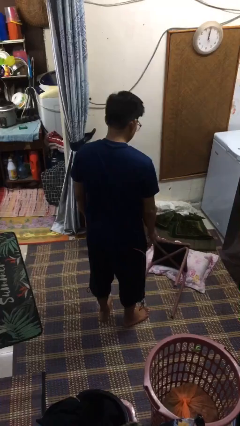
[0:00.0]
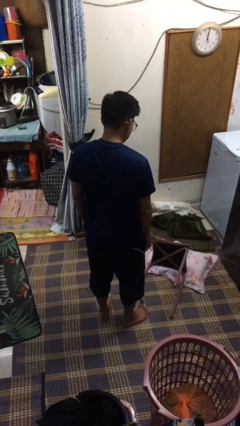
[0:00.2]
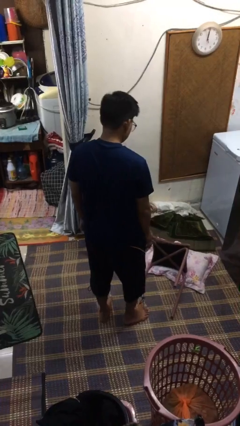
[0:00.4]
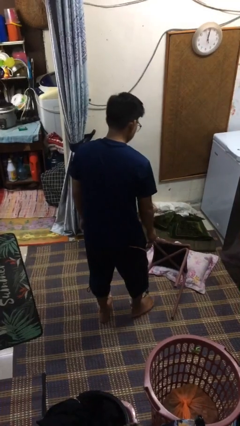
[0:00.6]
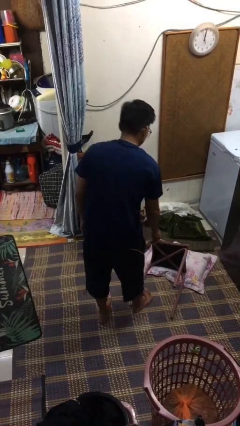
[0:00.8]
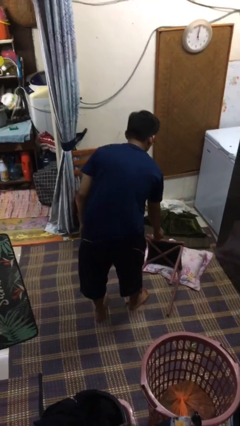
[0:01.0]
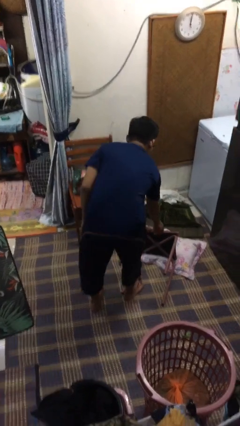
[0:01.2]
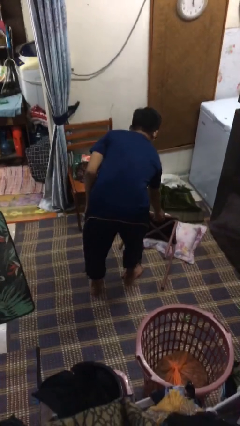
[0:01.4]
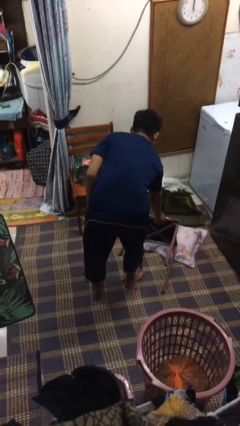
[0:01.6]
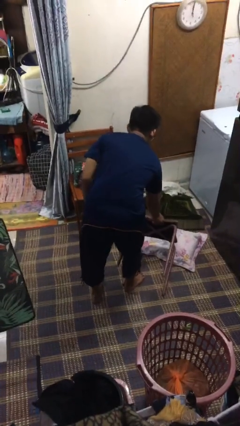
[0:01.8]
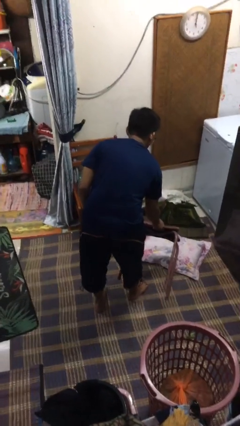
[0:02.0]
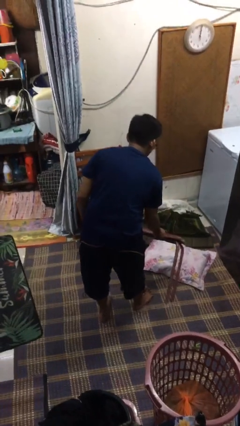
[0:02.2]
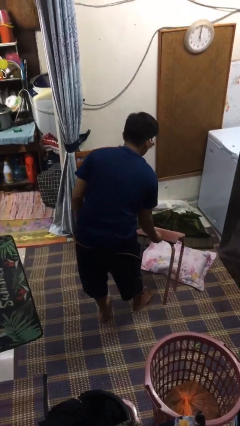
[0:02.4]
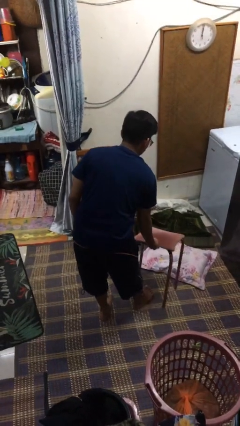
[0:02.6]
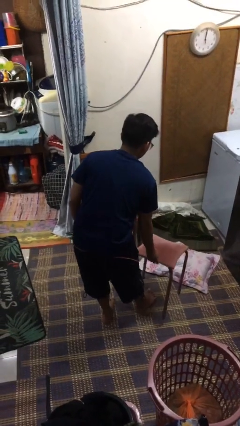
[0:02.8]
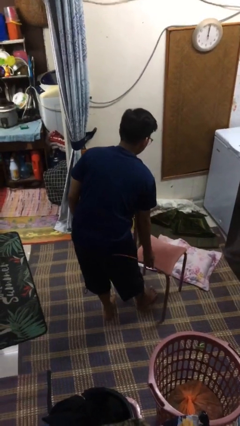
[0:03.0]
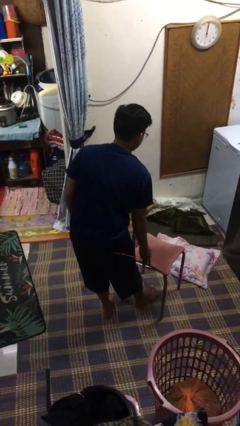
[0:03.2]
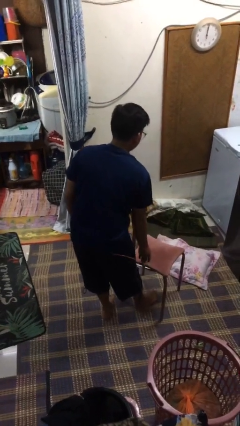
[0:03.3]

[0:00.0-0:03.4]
person sets upright furniture

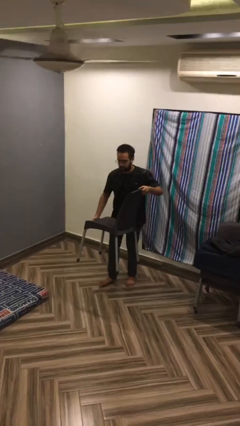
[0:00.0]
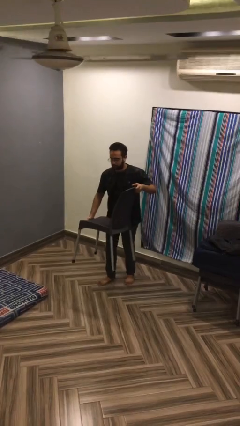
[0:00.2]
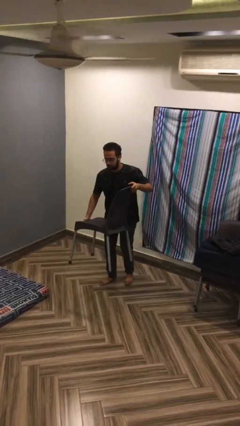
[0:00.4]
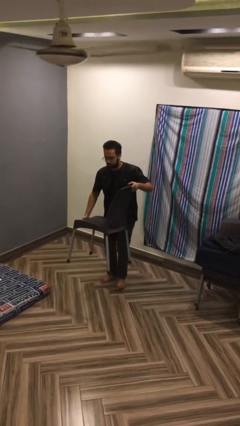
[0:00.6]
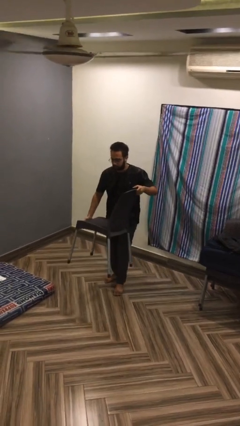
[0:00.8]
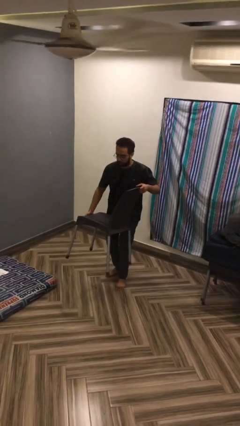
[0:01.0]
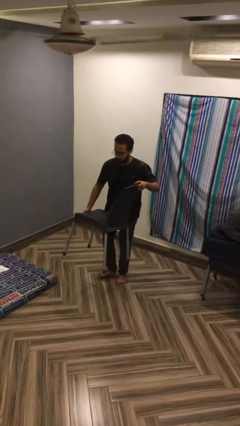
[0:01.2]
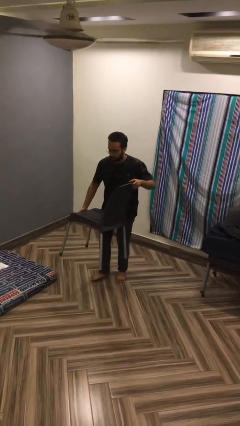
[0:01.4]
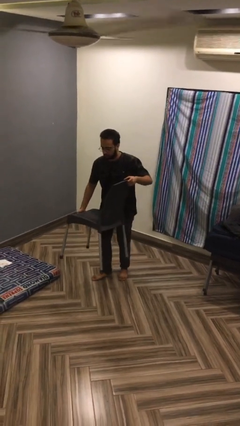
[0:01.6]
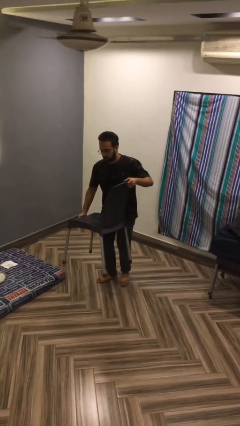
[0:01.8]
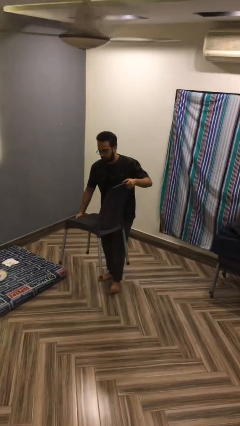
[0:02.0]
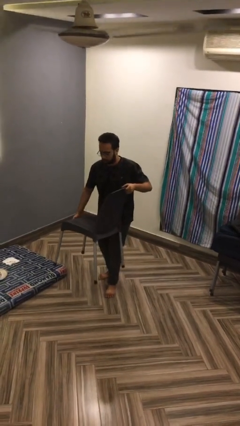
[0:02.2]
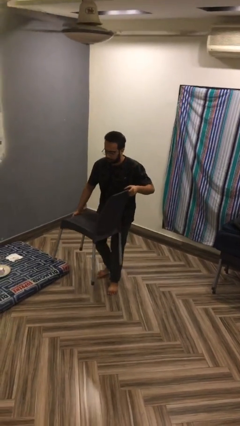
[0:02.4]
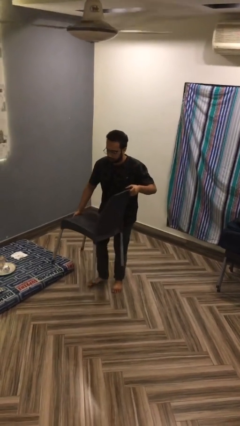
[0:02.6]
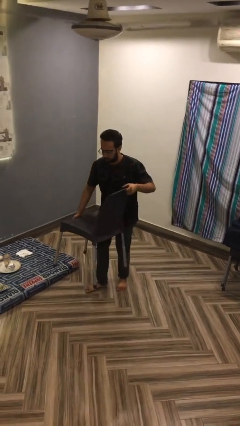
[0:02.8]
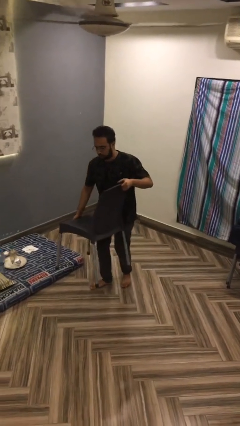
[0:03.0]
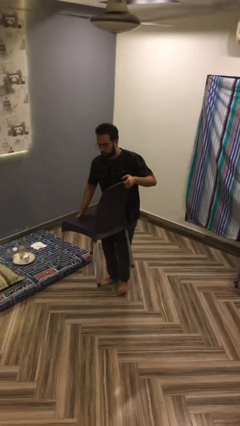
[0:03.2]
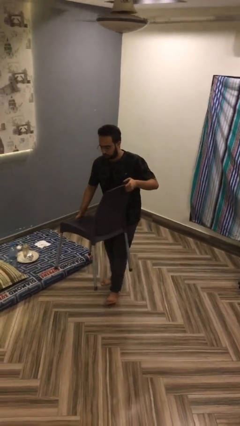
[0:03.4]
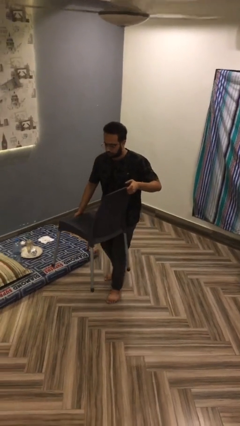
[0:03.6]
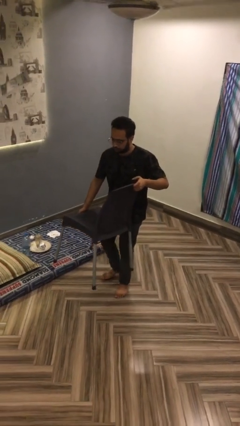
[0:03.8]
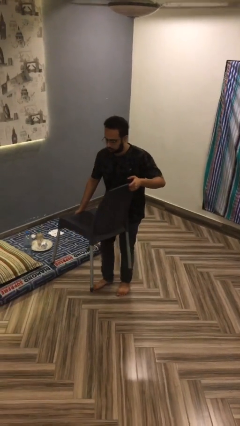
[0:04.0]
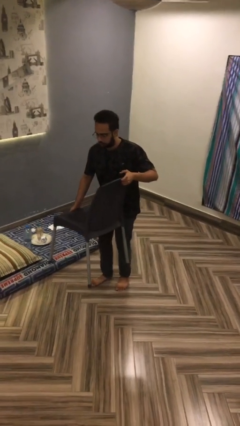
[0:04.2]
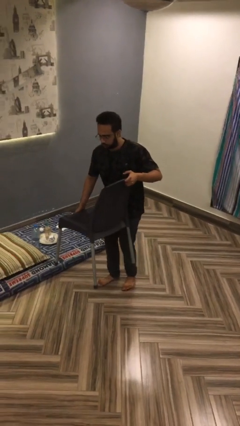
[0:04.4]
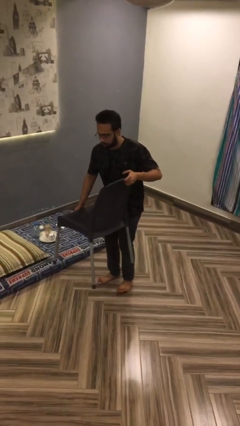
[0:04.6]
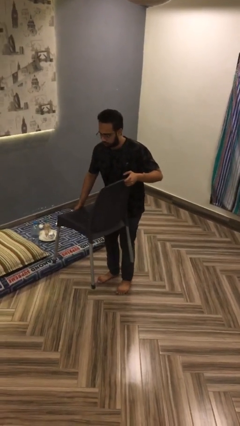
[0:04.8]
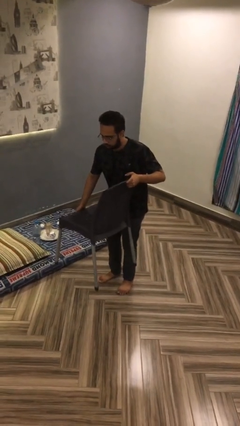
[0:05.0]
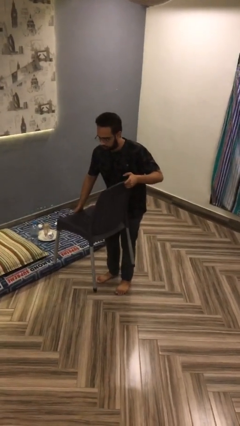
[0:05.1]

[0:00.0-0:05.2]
person carries heavy object

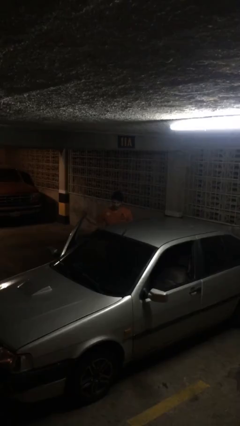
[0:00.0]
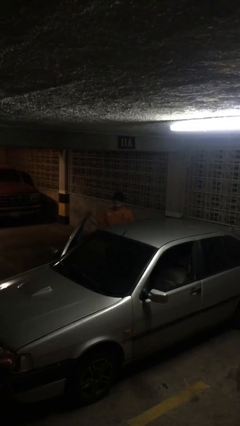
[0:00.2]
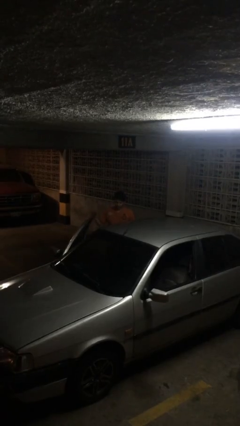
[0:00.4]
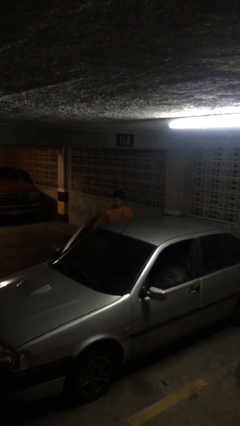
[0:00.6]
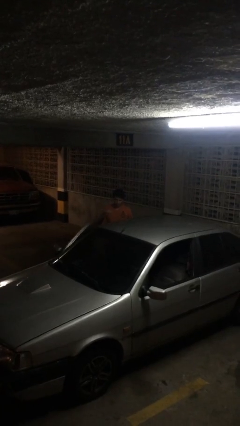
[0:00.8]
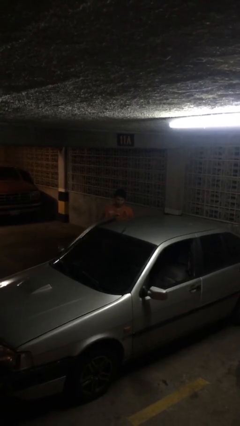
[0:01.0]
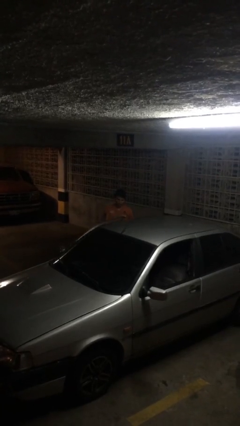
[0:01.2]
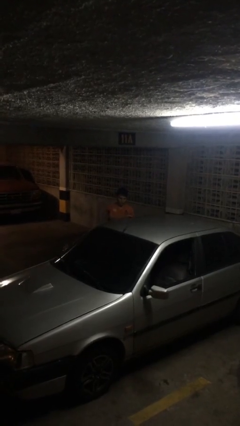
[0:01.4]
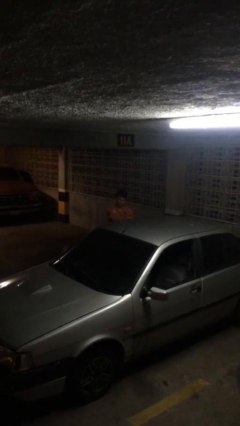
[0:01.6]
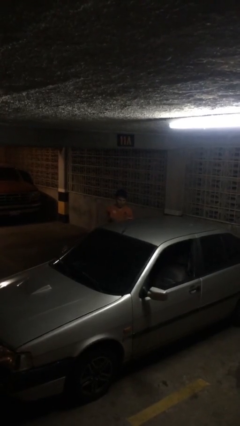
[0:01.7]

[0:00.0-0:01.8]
person closes car door

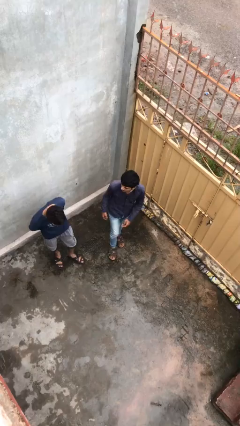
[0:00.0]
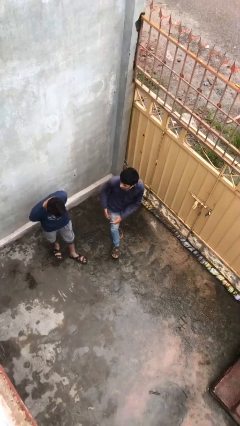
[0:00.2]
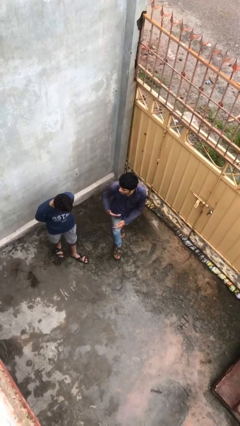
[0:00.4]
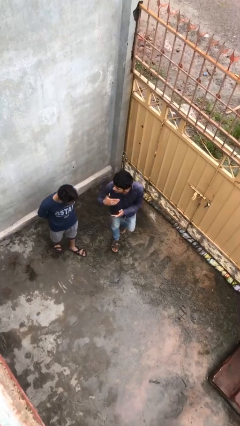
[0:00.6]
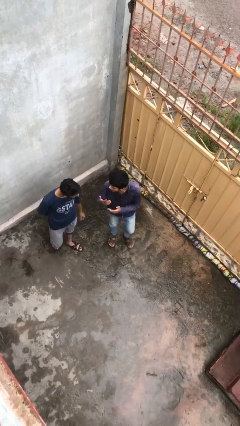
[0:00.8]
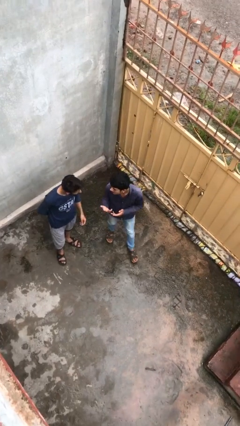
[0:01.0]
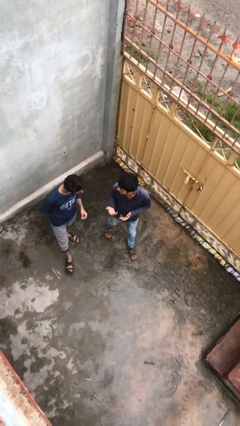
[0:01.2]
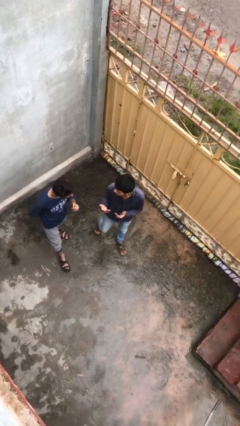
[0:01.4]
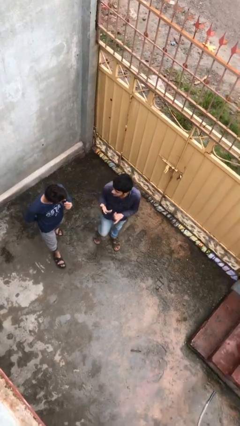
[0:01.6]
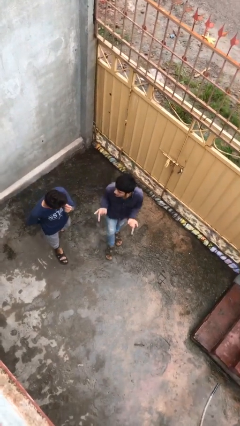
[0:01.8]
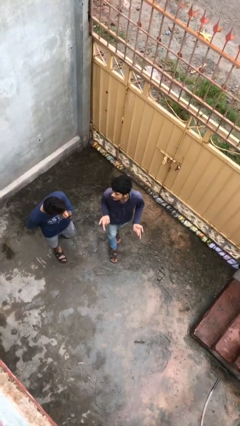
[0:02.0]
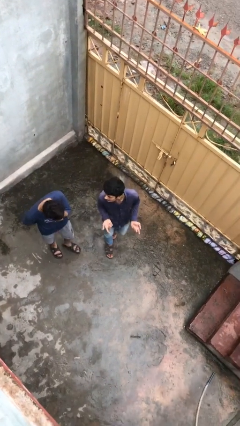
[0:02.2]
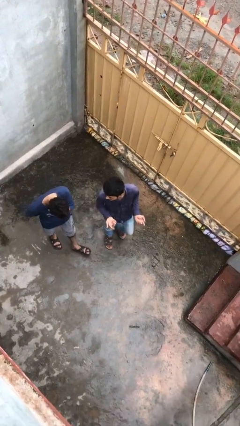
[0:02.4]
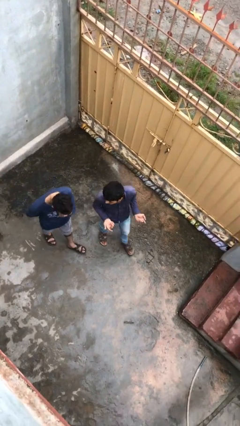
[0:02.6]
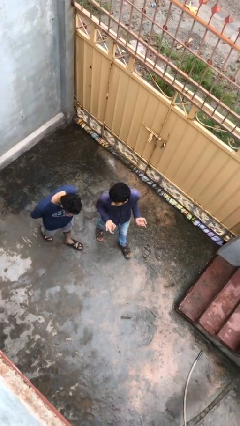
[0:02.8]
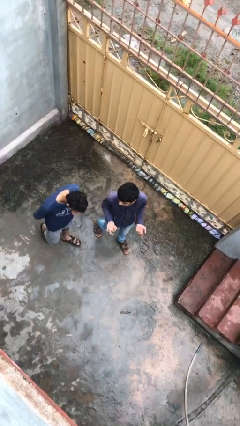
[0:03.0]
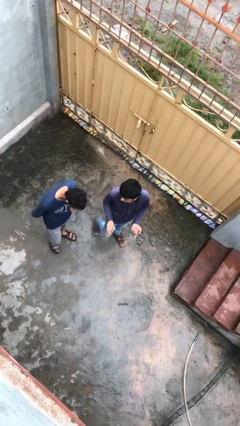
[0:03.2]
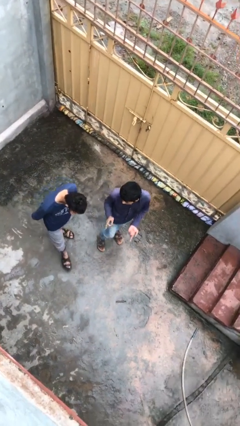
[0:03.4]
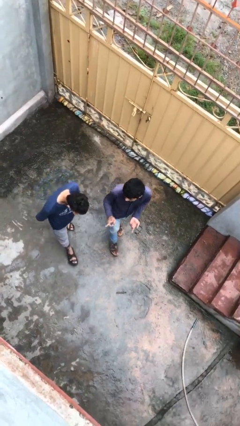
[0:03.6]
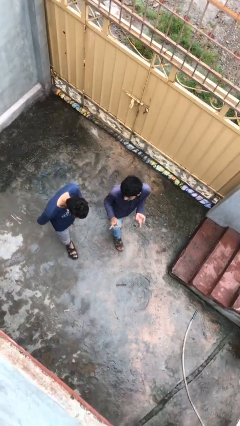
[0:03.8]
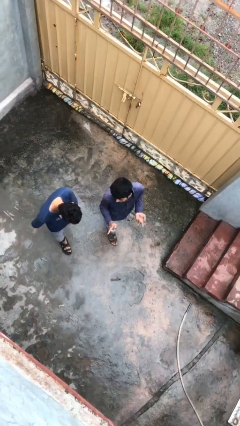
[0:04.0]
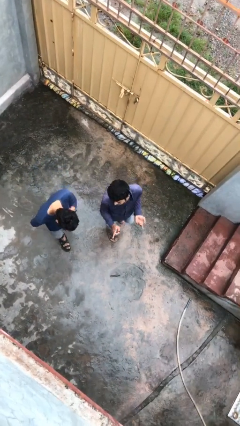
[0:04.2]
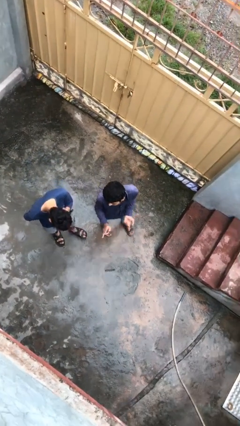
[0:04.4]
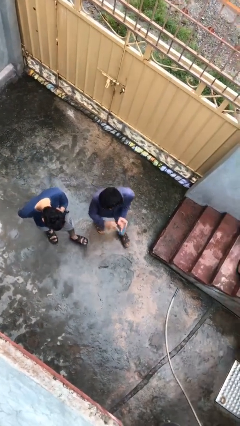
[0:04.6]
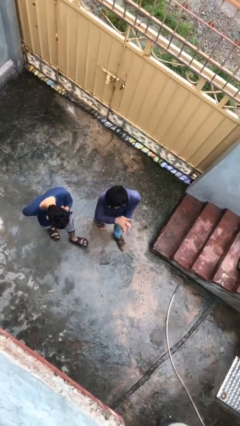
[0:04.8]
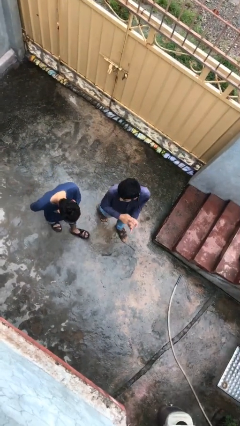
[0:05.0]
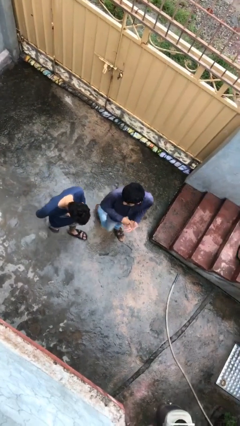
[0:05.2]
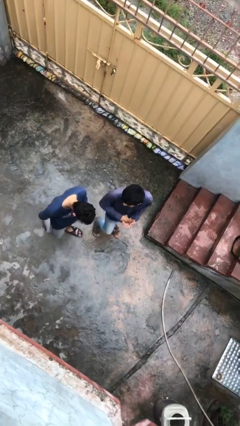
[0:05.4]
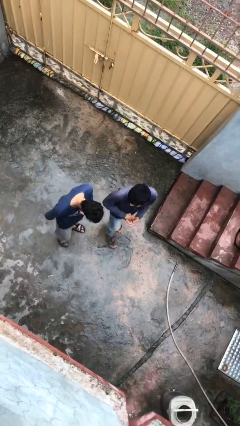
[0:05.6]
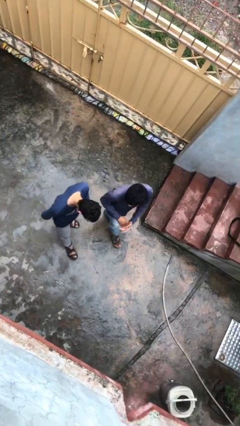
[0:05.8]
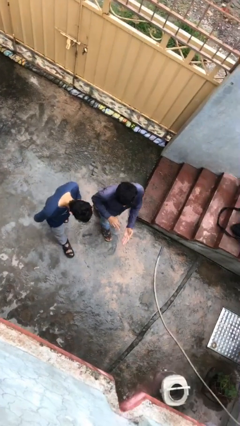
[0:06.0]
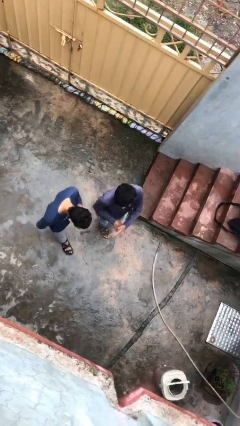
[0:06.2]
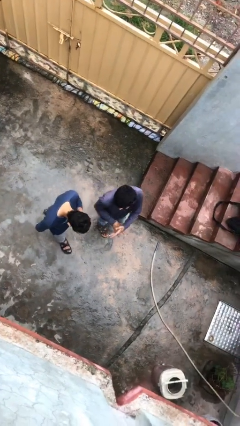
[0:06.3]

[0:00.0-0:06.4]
person talks to person

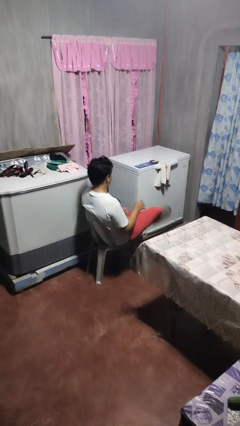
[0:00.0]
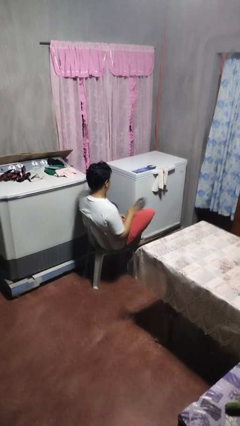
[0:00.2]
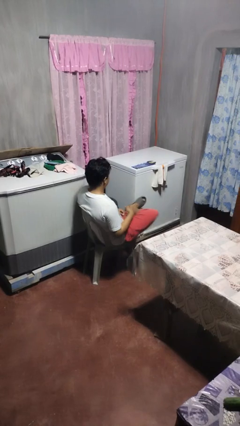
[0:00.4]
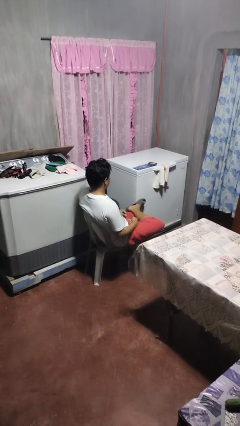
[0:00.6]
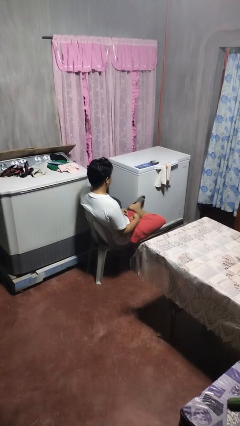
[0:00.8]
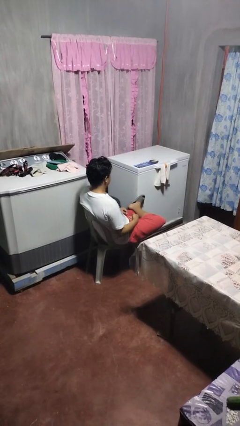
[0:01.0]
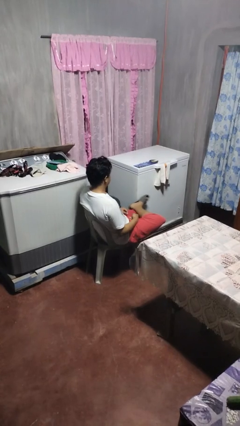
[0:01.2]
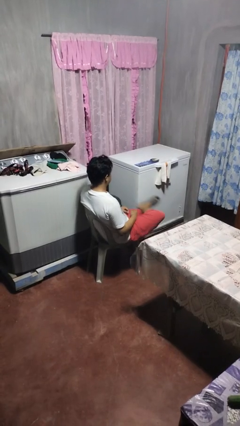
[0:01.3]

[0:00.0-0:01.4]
person crosses legs
